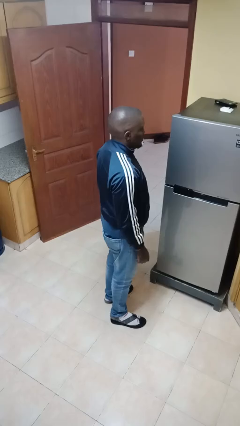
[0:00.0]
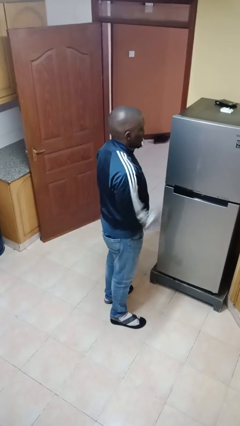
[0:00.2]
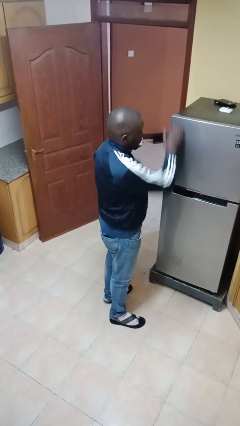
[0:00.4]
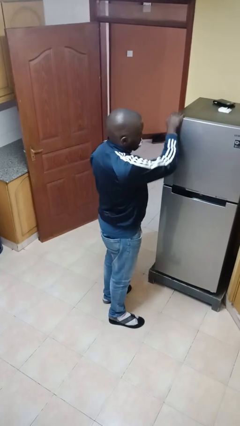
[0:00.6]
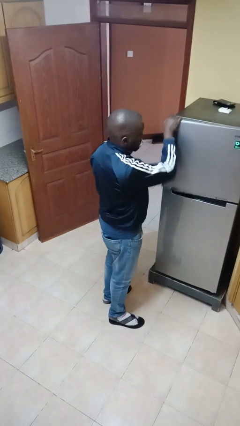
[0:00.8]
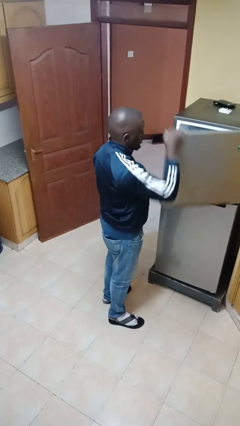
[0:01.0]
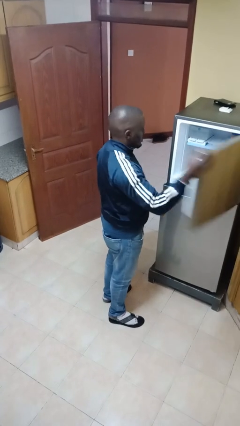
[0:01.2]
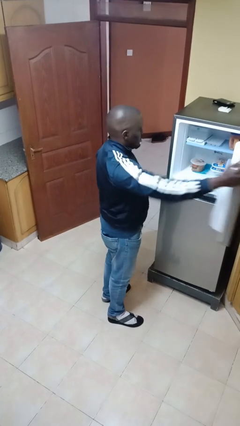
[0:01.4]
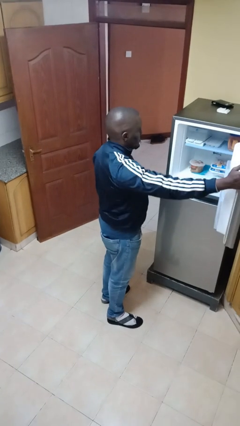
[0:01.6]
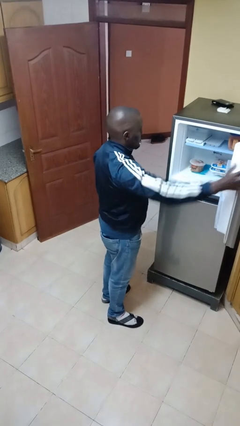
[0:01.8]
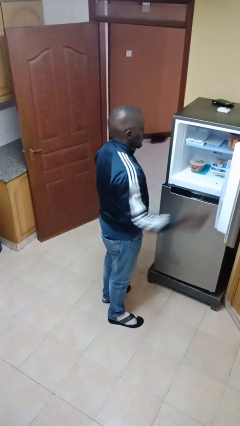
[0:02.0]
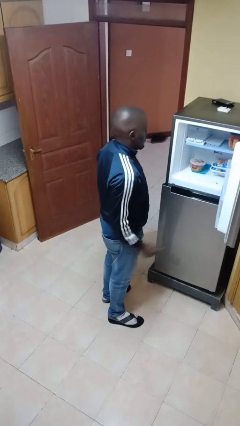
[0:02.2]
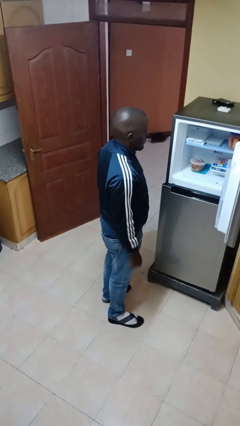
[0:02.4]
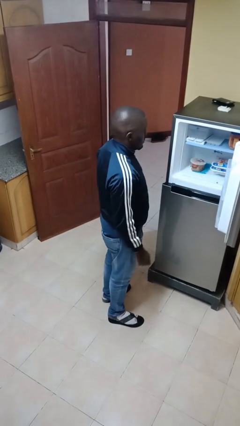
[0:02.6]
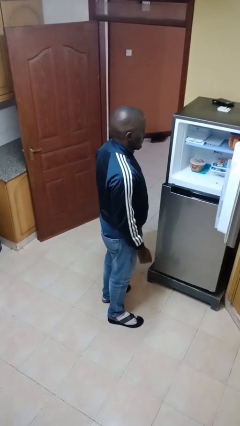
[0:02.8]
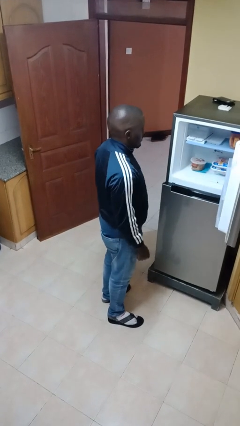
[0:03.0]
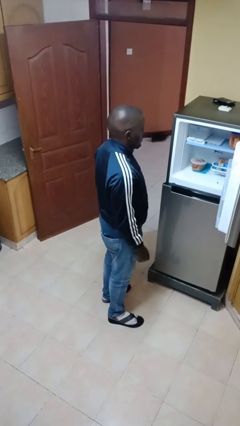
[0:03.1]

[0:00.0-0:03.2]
person opens refrigerator

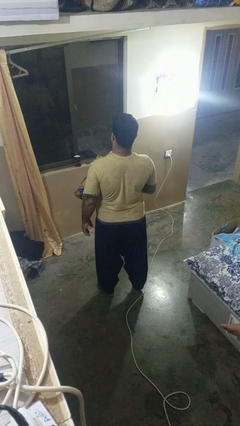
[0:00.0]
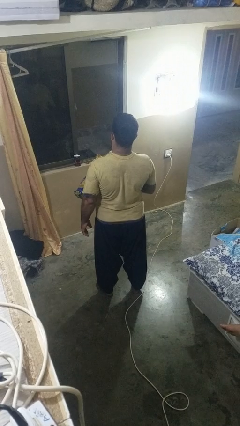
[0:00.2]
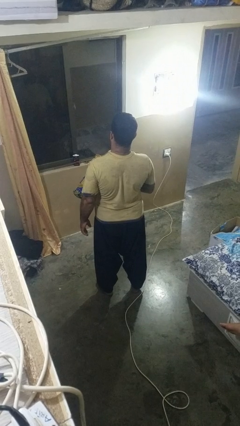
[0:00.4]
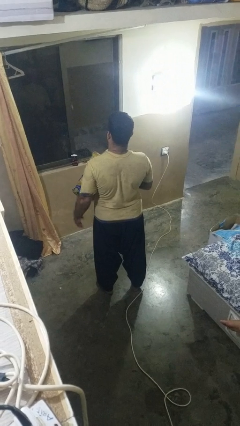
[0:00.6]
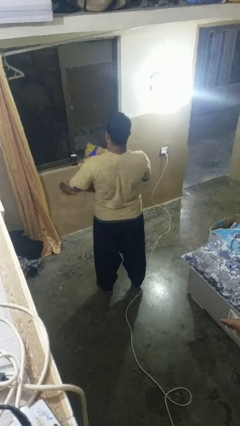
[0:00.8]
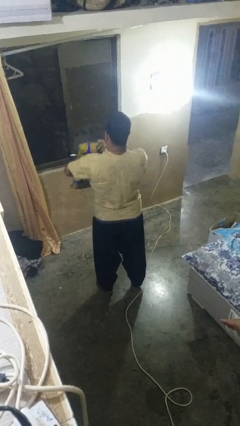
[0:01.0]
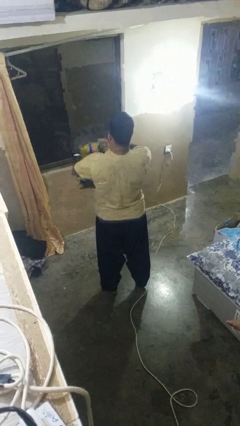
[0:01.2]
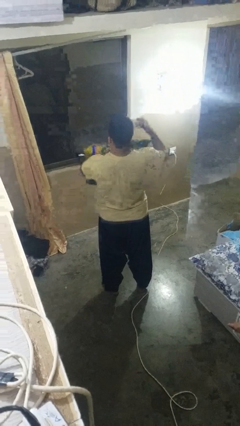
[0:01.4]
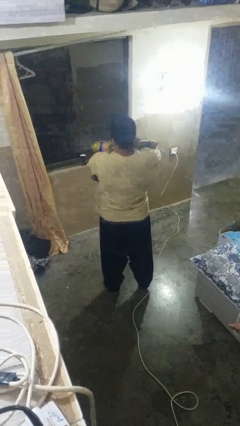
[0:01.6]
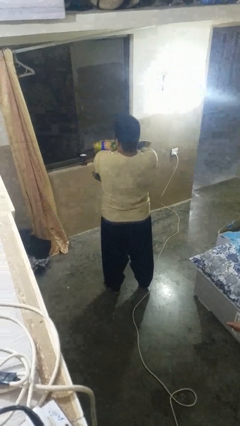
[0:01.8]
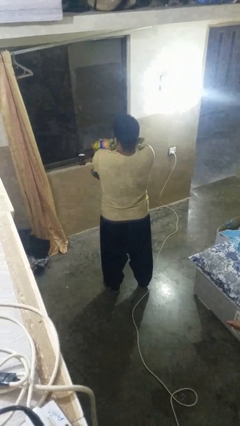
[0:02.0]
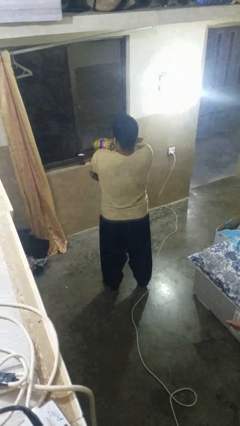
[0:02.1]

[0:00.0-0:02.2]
person squeezes object

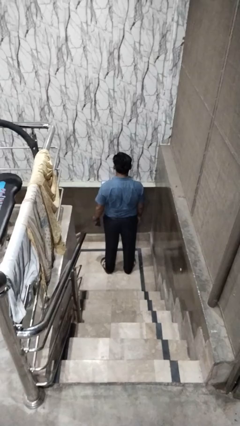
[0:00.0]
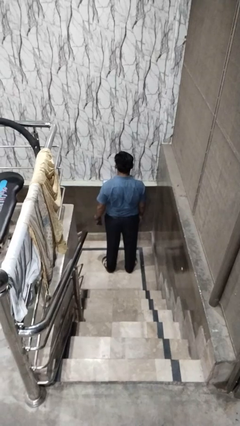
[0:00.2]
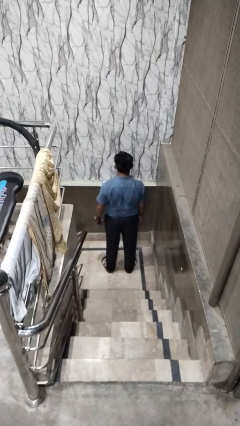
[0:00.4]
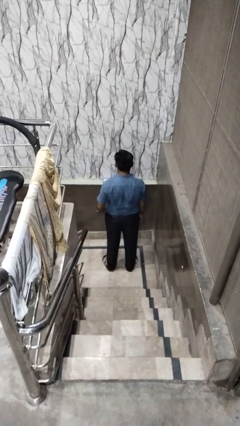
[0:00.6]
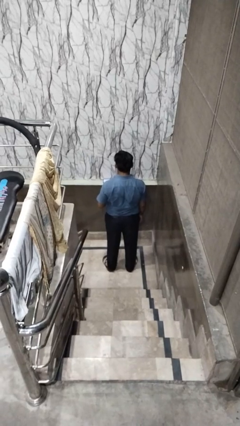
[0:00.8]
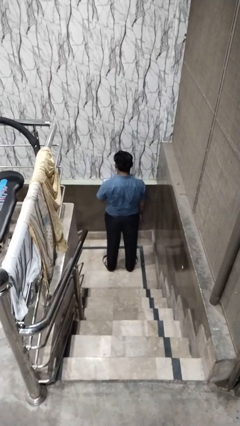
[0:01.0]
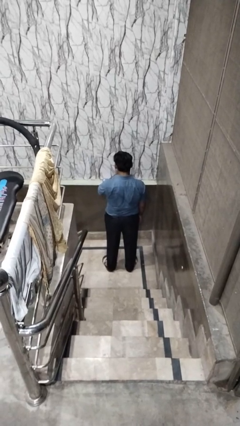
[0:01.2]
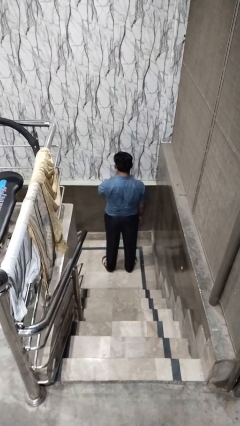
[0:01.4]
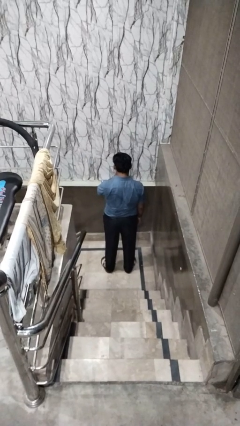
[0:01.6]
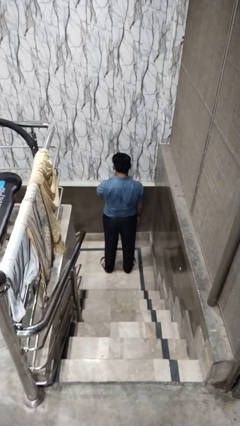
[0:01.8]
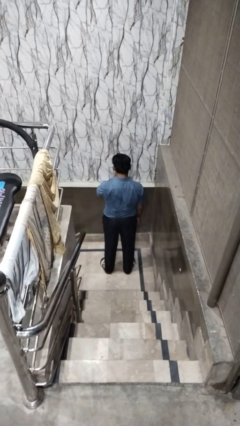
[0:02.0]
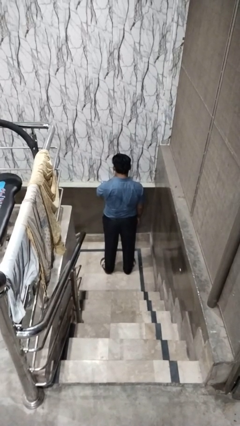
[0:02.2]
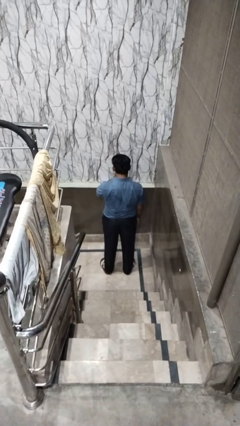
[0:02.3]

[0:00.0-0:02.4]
person blows nose

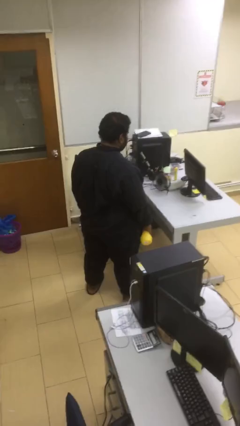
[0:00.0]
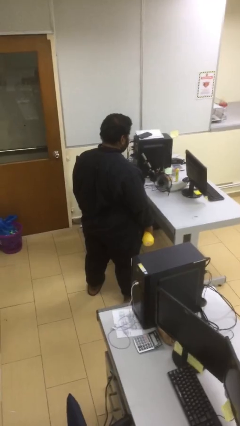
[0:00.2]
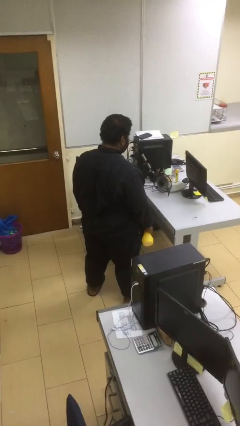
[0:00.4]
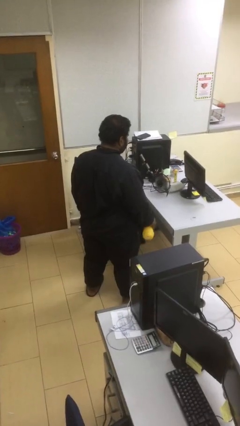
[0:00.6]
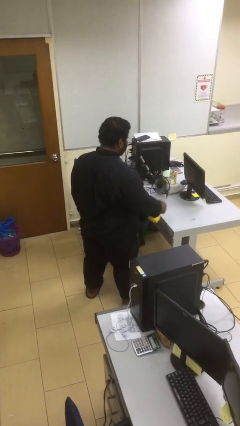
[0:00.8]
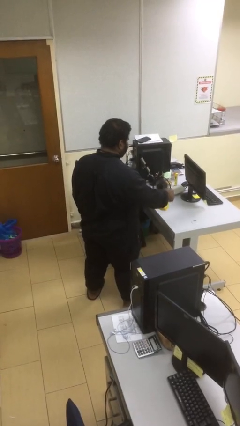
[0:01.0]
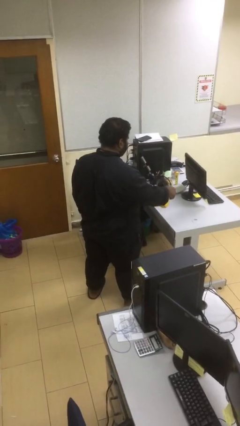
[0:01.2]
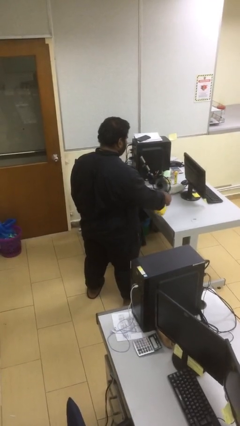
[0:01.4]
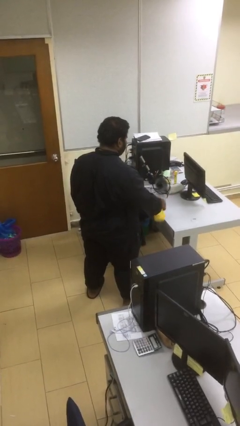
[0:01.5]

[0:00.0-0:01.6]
person sprays from bottle

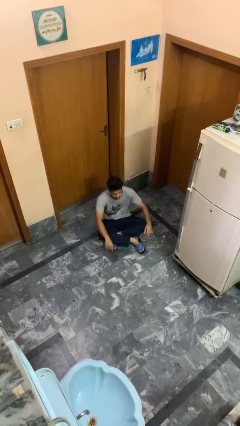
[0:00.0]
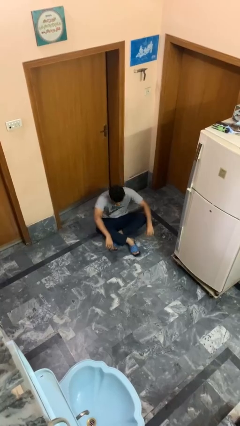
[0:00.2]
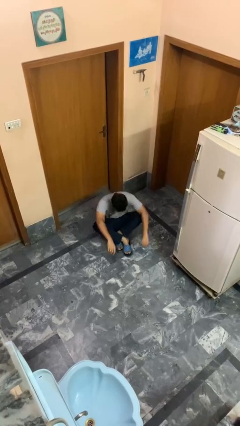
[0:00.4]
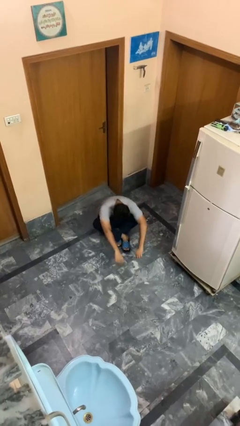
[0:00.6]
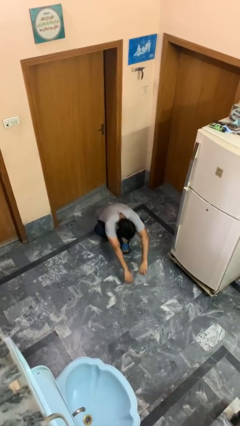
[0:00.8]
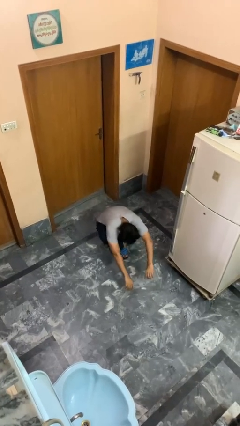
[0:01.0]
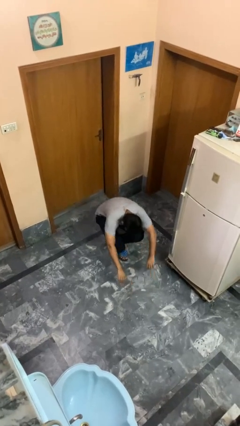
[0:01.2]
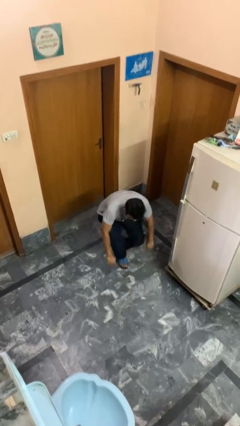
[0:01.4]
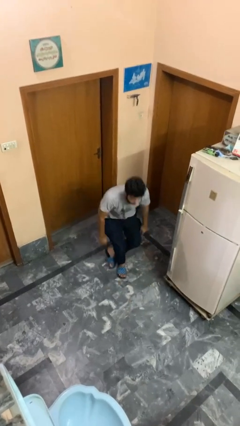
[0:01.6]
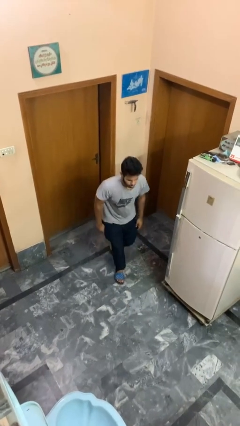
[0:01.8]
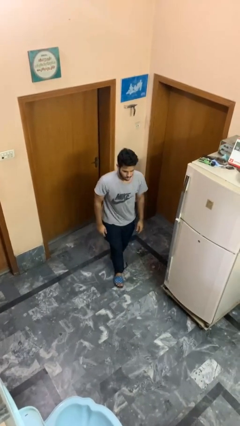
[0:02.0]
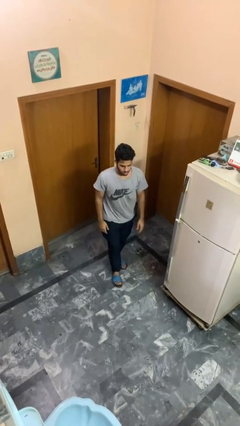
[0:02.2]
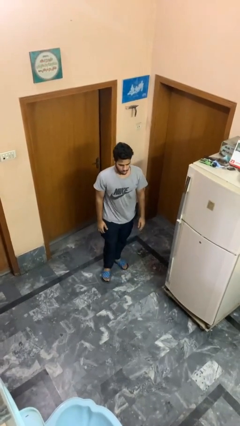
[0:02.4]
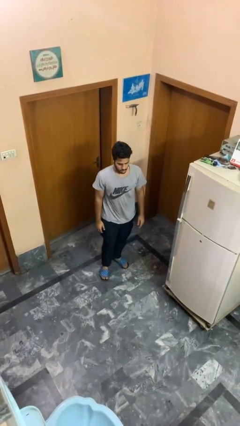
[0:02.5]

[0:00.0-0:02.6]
person stands up from floor

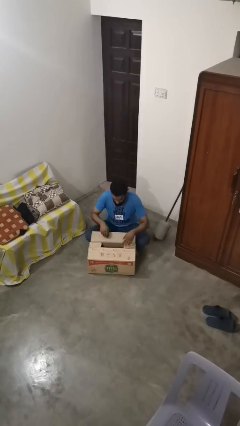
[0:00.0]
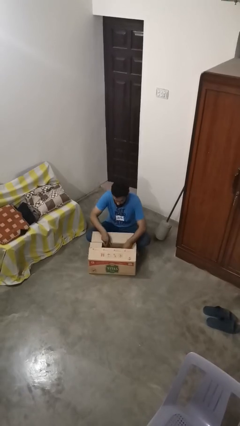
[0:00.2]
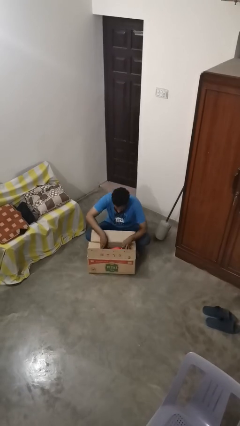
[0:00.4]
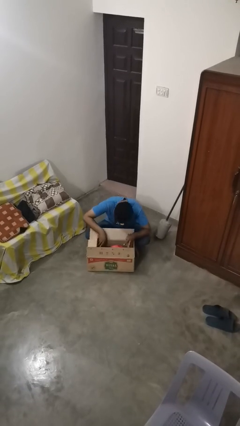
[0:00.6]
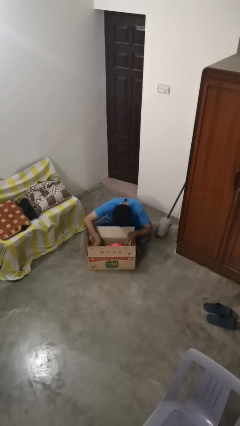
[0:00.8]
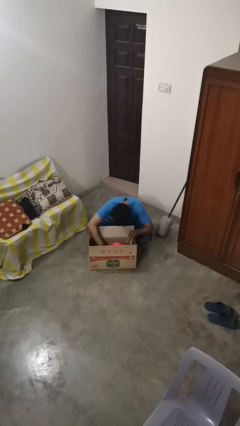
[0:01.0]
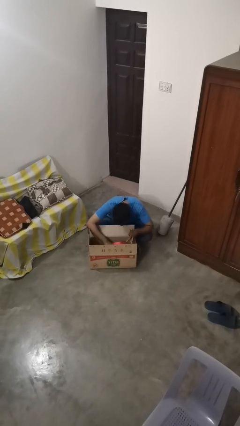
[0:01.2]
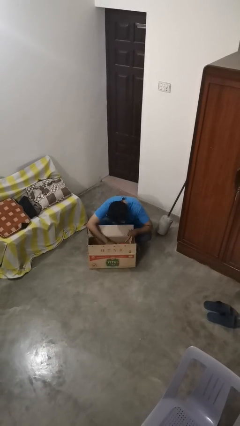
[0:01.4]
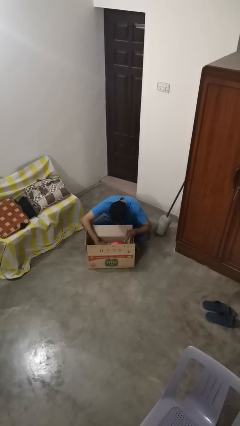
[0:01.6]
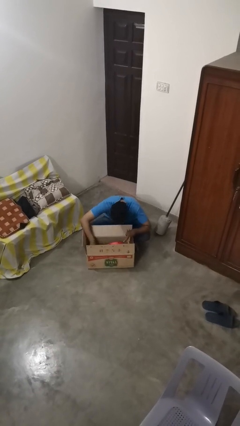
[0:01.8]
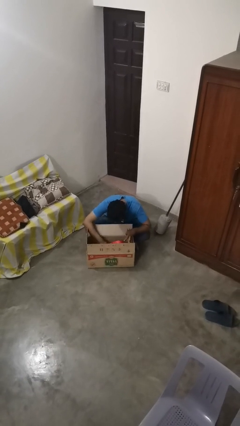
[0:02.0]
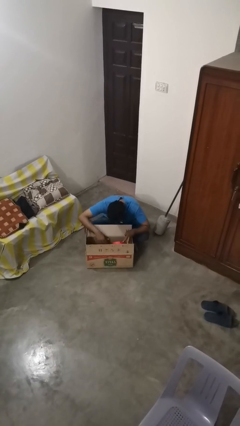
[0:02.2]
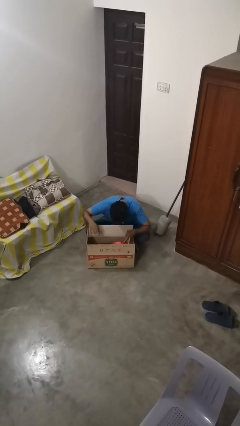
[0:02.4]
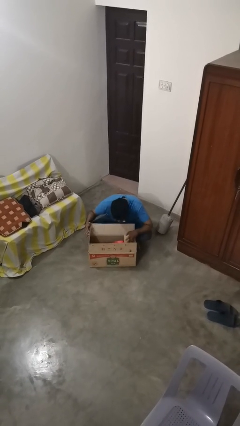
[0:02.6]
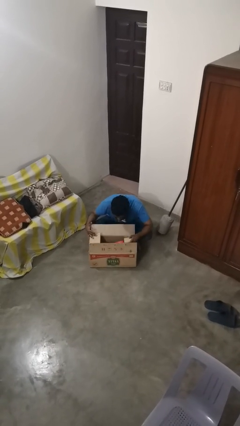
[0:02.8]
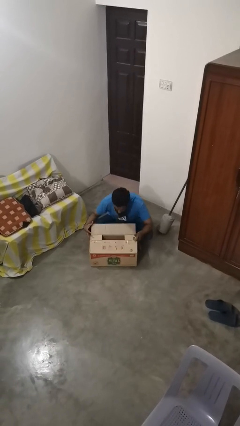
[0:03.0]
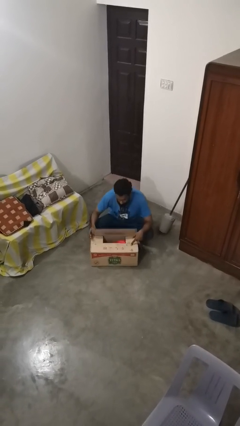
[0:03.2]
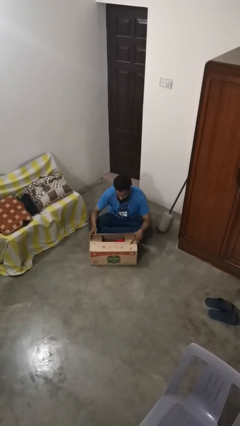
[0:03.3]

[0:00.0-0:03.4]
person searches in box

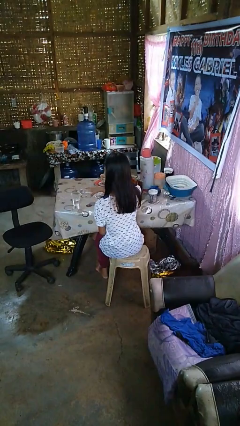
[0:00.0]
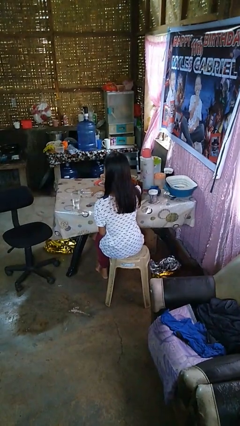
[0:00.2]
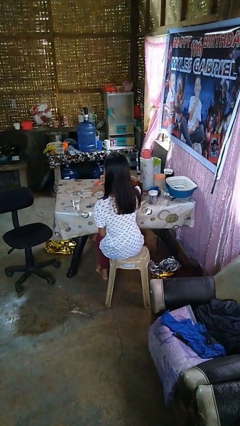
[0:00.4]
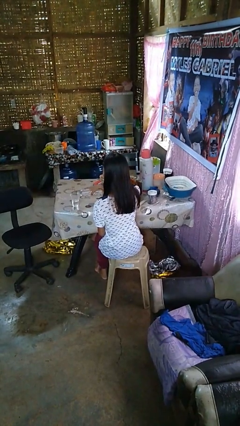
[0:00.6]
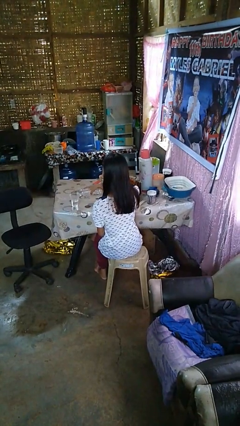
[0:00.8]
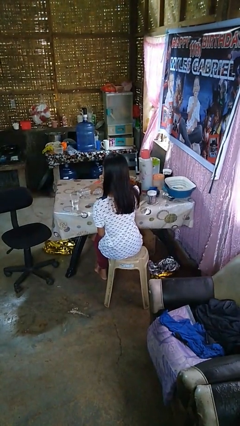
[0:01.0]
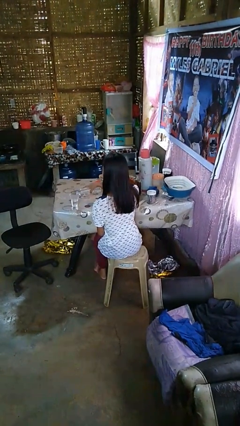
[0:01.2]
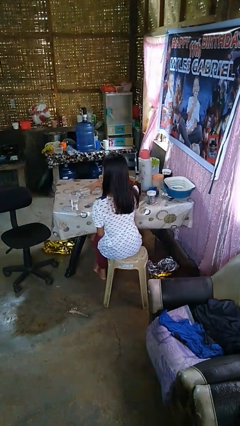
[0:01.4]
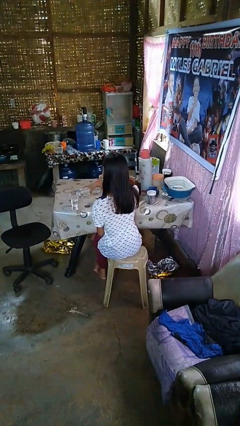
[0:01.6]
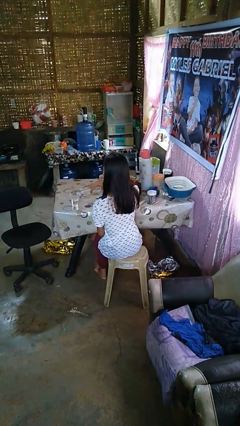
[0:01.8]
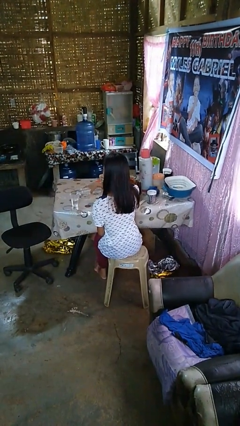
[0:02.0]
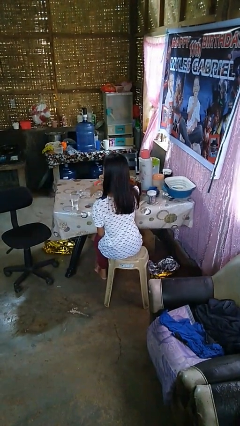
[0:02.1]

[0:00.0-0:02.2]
person pours liquid into cup
